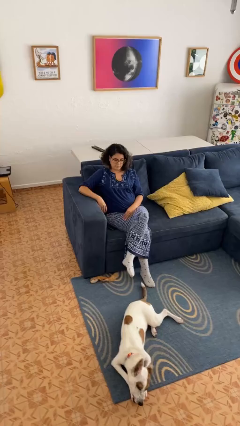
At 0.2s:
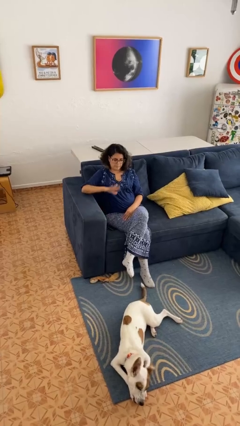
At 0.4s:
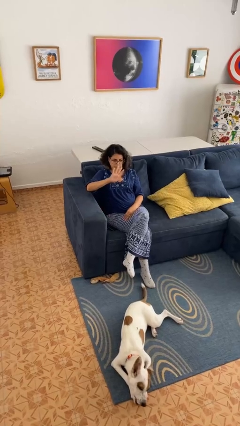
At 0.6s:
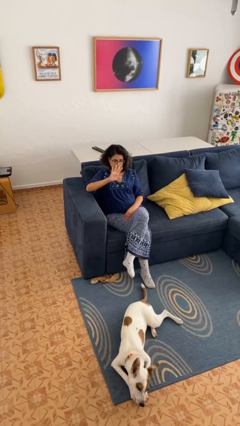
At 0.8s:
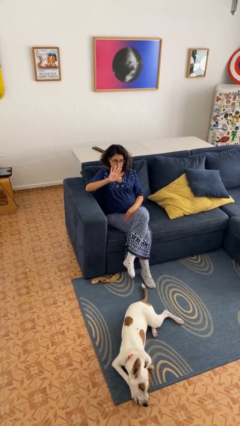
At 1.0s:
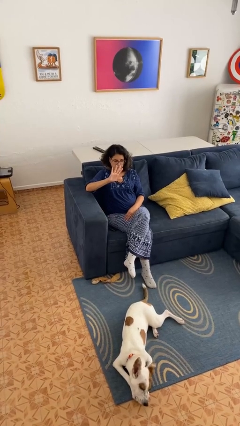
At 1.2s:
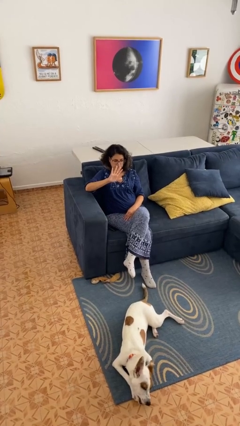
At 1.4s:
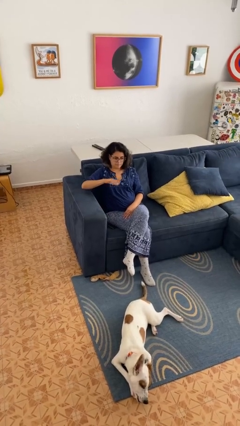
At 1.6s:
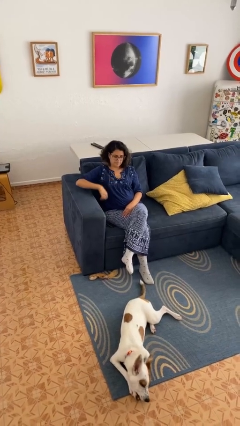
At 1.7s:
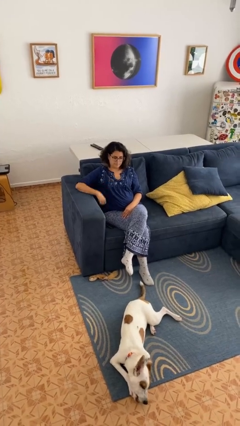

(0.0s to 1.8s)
person gestures number five

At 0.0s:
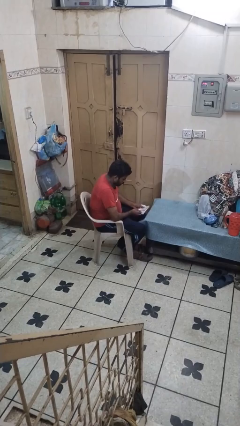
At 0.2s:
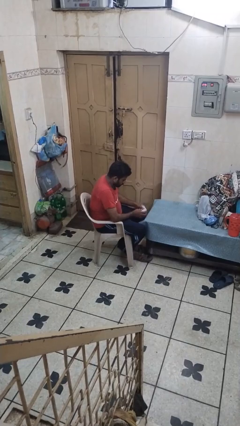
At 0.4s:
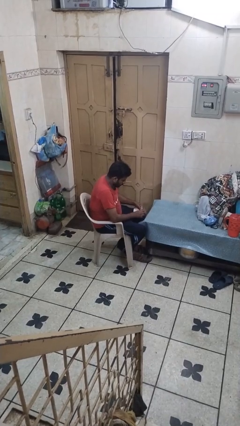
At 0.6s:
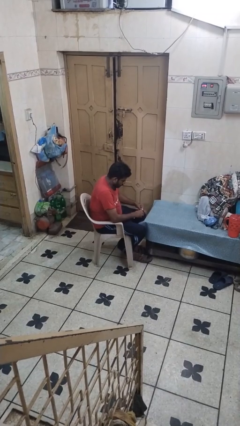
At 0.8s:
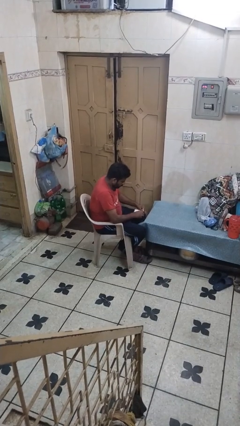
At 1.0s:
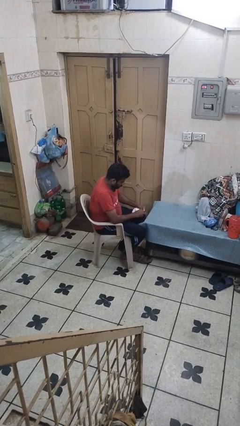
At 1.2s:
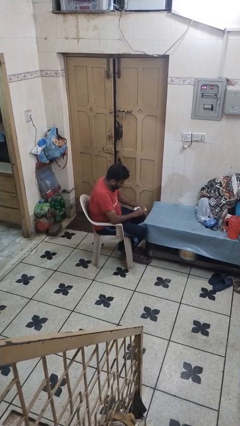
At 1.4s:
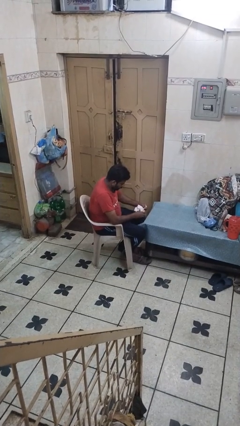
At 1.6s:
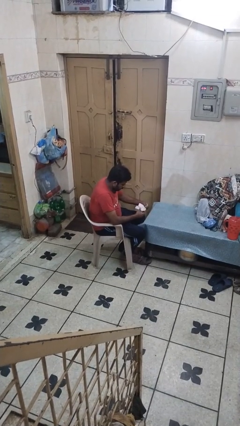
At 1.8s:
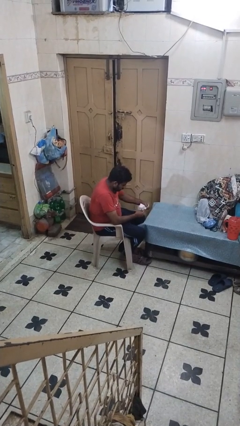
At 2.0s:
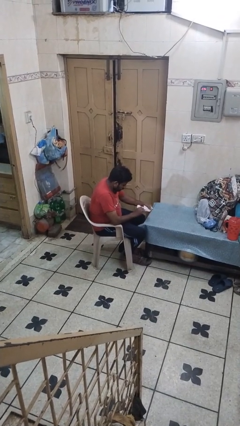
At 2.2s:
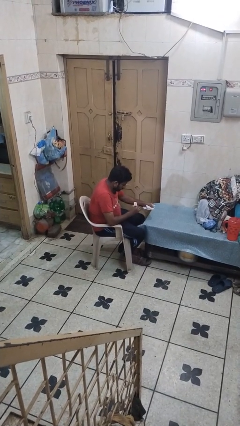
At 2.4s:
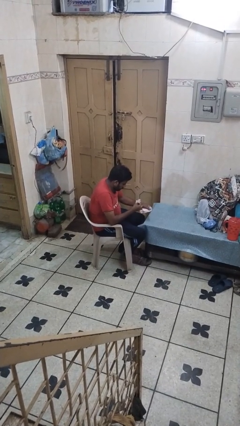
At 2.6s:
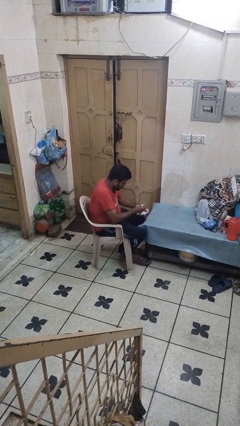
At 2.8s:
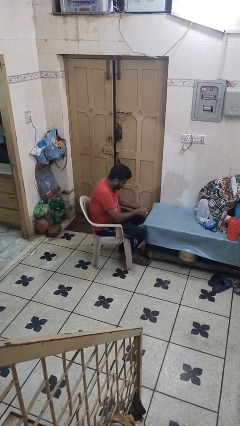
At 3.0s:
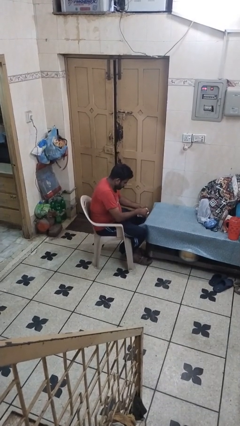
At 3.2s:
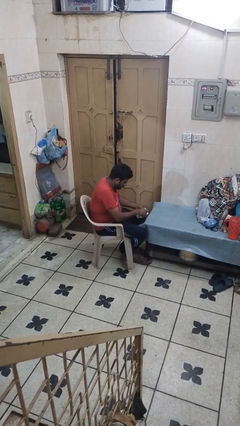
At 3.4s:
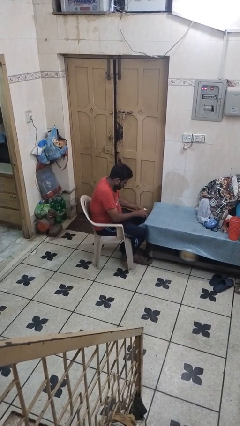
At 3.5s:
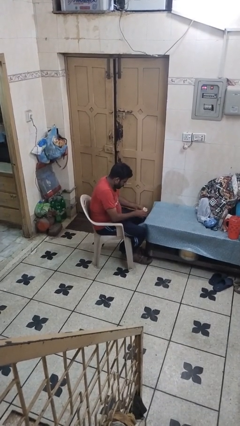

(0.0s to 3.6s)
person tears paper

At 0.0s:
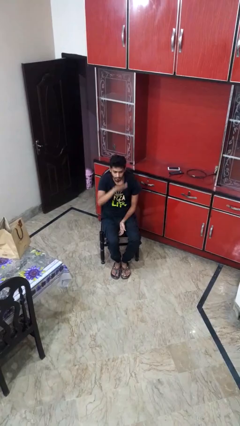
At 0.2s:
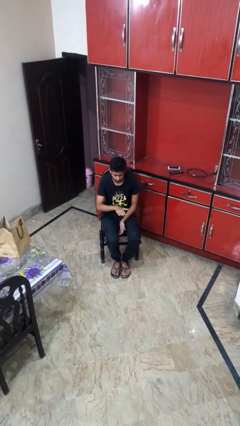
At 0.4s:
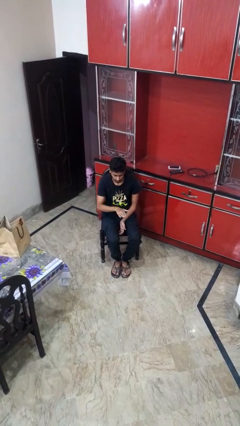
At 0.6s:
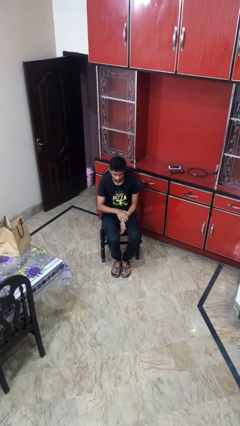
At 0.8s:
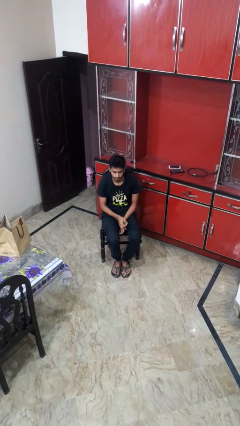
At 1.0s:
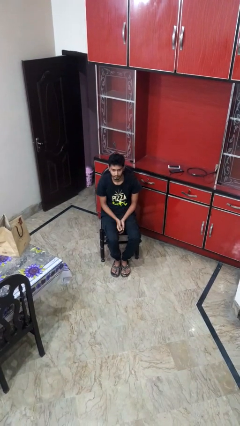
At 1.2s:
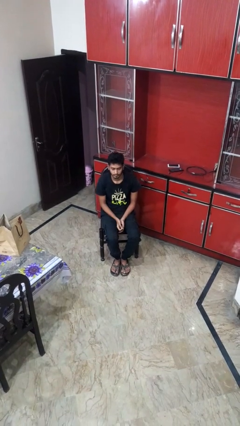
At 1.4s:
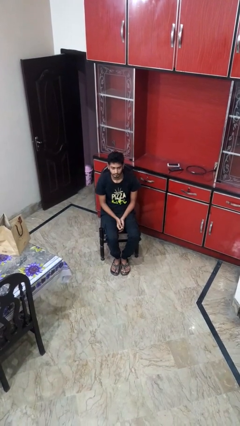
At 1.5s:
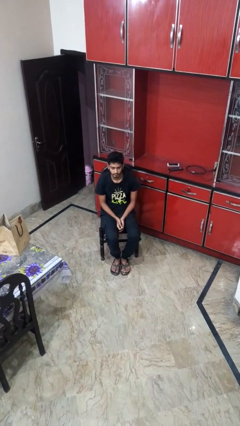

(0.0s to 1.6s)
person gestures swipe down

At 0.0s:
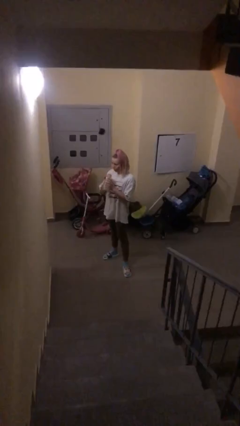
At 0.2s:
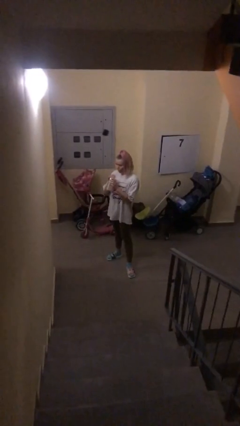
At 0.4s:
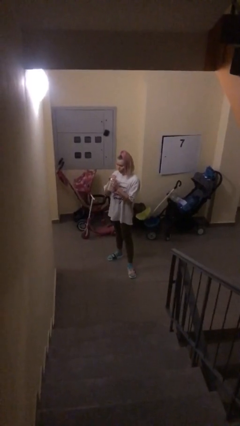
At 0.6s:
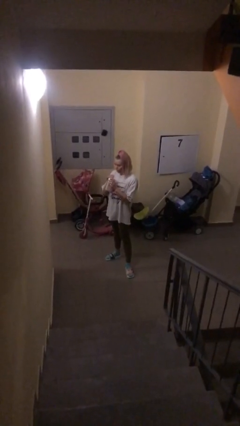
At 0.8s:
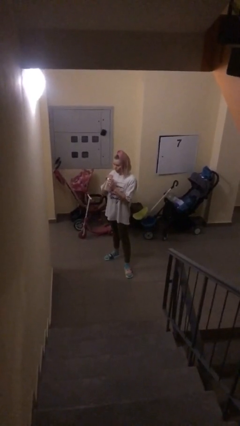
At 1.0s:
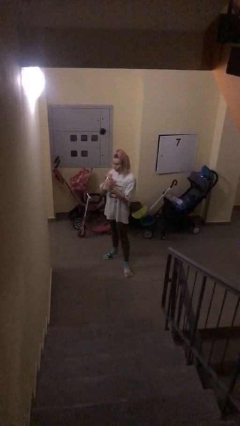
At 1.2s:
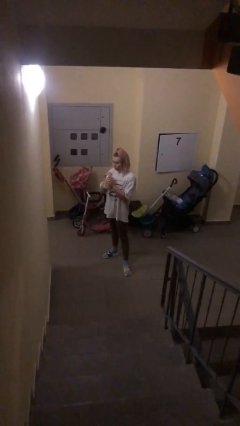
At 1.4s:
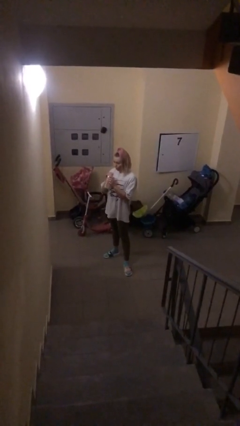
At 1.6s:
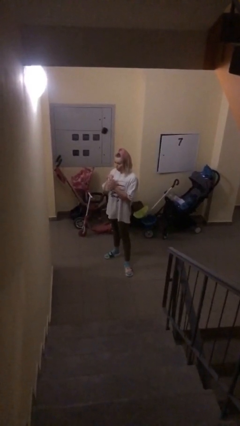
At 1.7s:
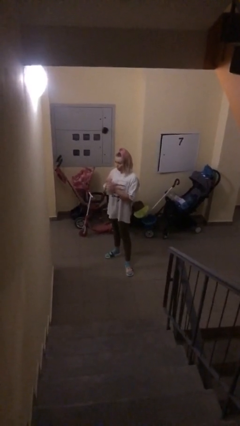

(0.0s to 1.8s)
person drinks from straw

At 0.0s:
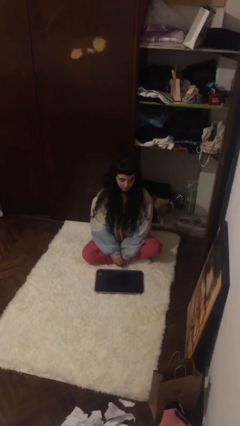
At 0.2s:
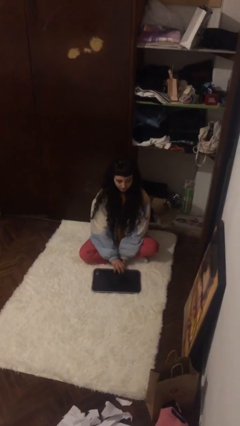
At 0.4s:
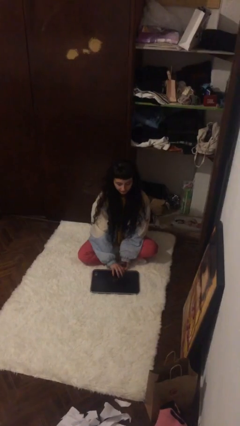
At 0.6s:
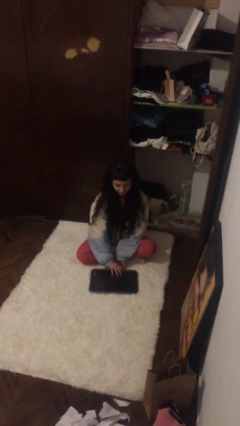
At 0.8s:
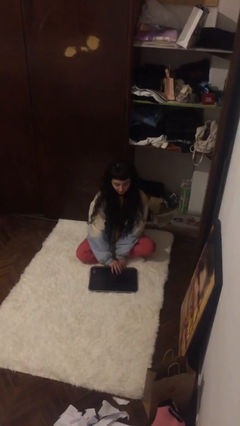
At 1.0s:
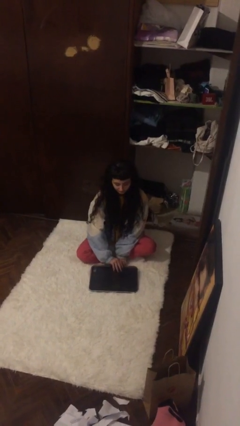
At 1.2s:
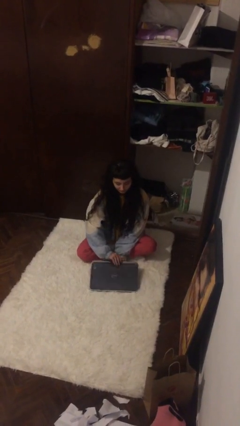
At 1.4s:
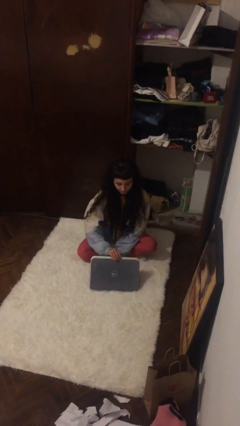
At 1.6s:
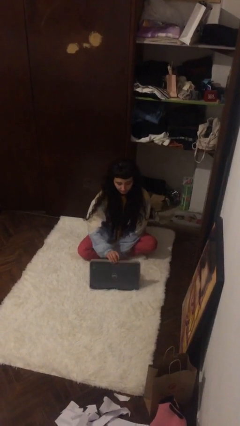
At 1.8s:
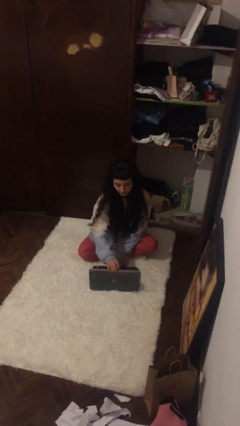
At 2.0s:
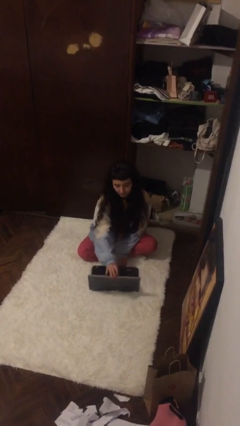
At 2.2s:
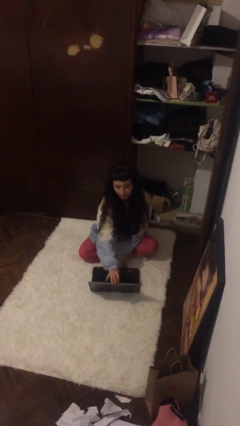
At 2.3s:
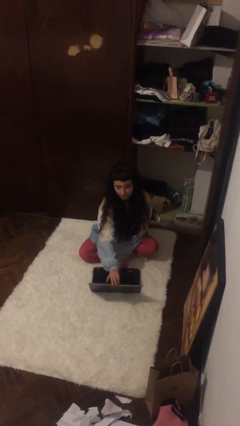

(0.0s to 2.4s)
person opens laptop

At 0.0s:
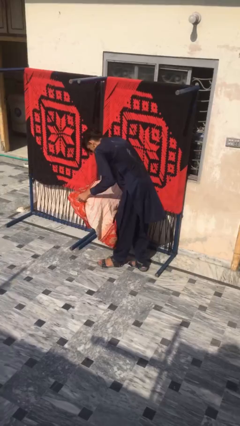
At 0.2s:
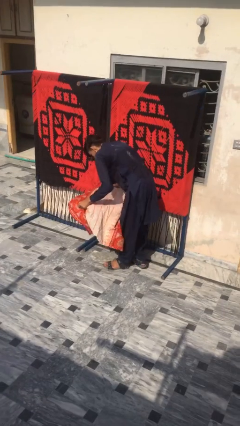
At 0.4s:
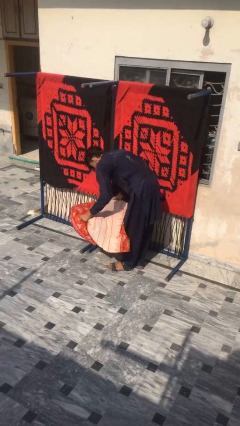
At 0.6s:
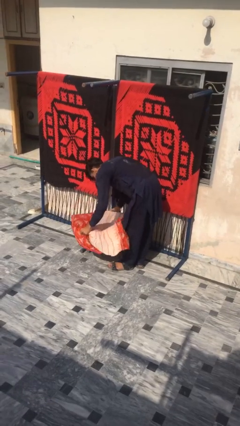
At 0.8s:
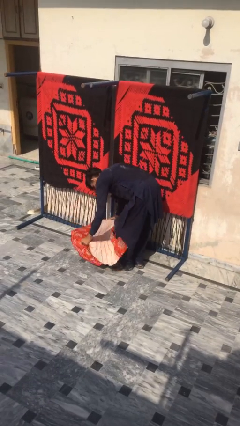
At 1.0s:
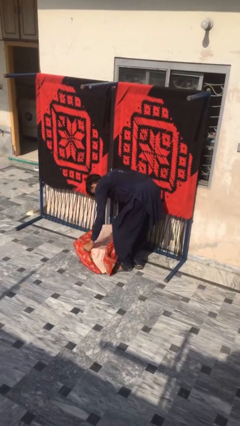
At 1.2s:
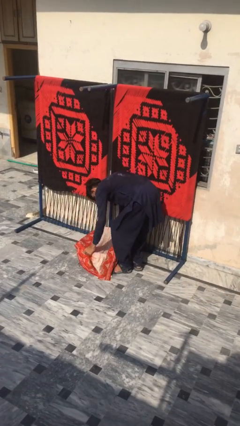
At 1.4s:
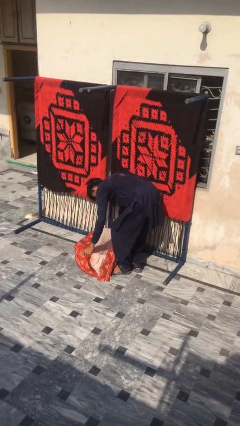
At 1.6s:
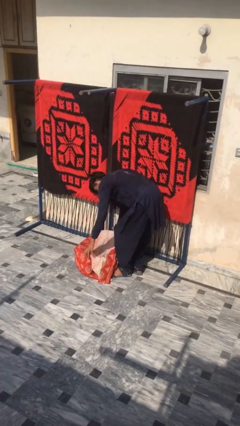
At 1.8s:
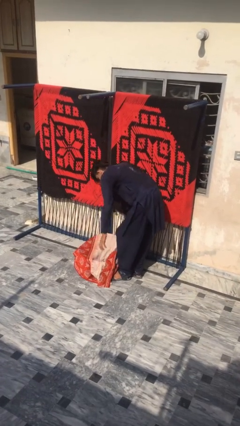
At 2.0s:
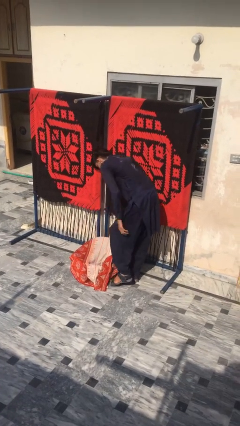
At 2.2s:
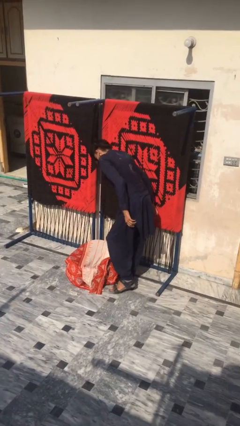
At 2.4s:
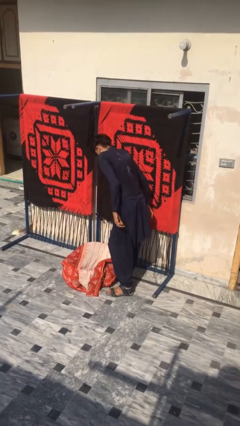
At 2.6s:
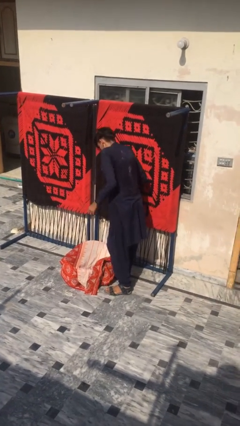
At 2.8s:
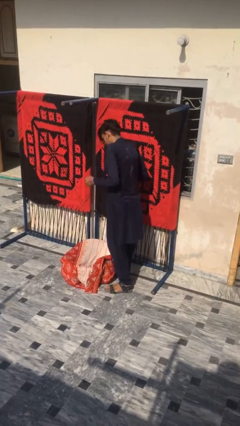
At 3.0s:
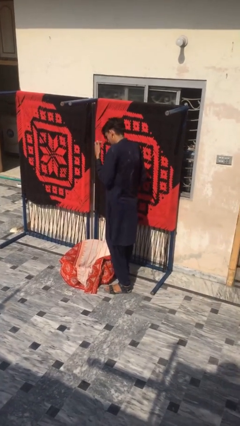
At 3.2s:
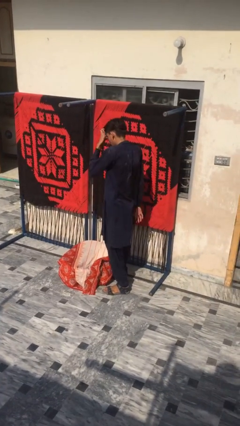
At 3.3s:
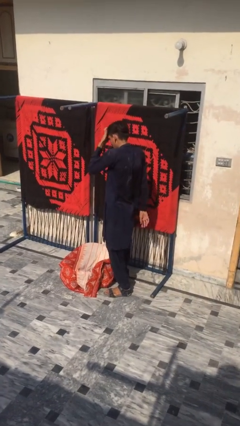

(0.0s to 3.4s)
person puts down object on floor

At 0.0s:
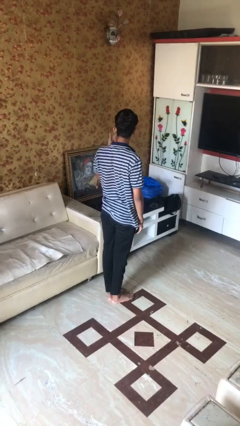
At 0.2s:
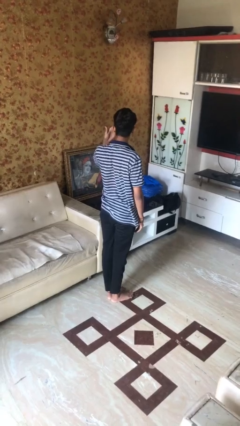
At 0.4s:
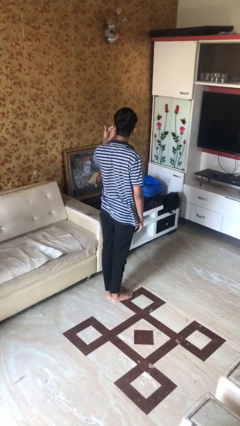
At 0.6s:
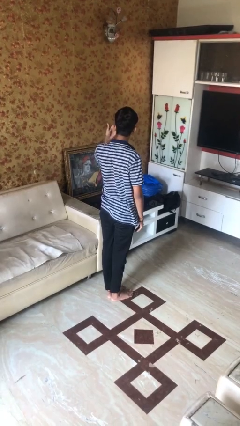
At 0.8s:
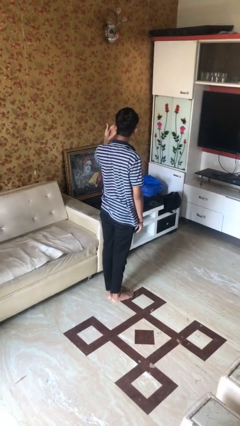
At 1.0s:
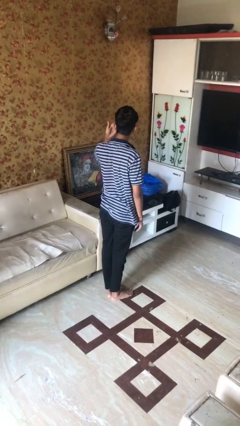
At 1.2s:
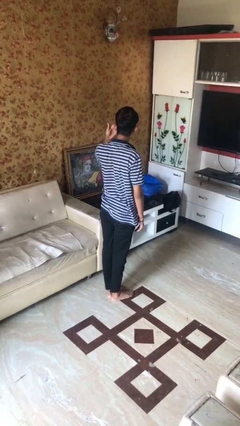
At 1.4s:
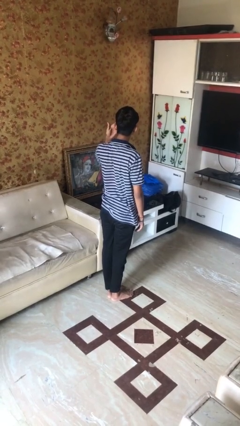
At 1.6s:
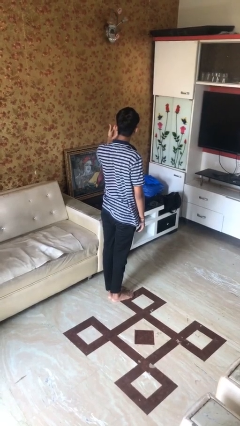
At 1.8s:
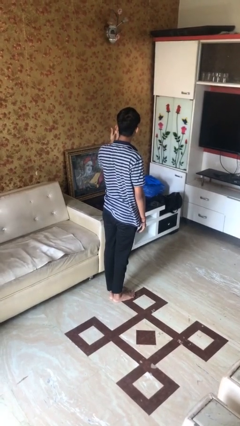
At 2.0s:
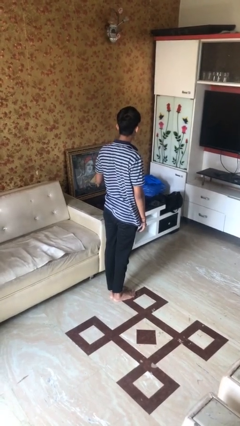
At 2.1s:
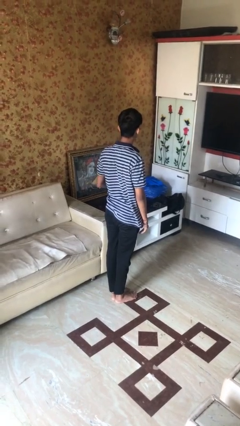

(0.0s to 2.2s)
person rubs eyes

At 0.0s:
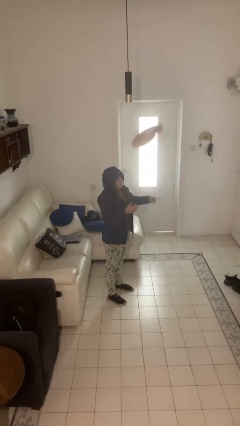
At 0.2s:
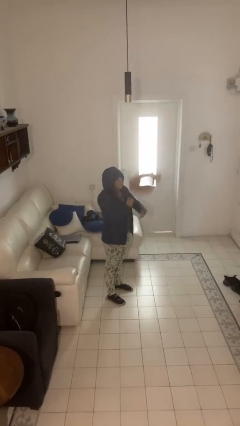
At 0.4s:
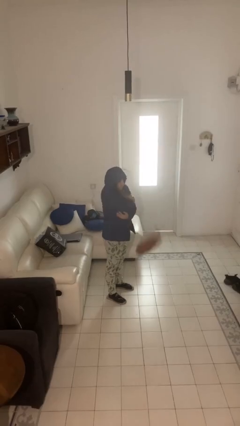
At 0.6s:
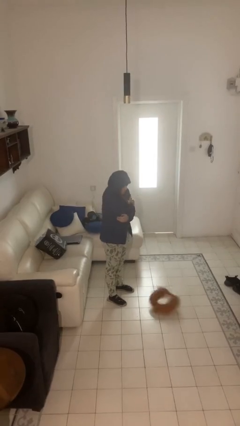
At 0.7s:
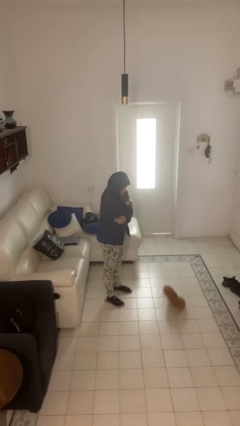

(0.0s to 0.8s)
person catches dropped object
